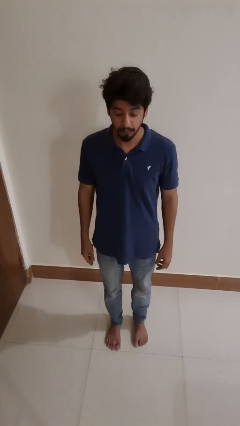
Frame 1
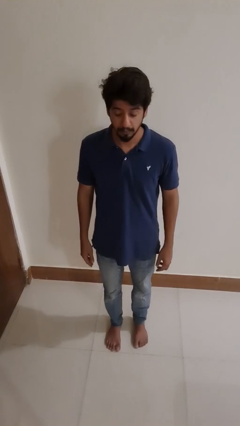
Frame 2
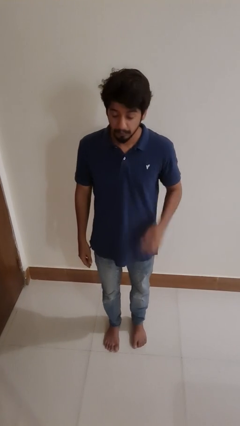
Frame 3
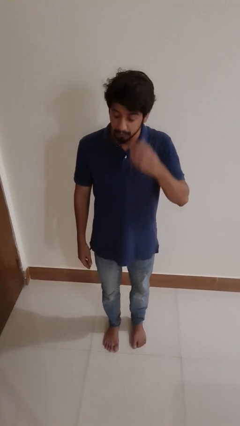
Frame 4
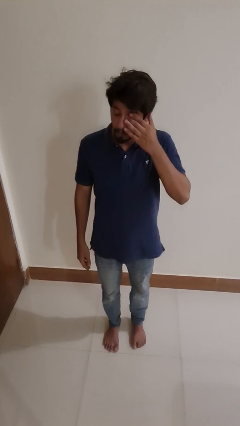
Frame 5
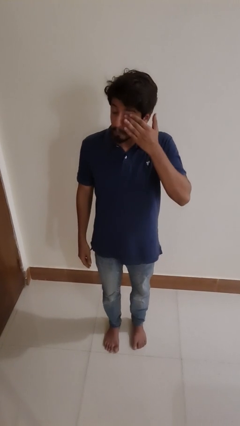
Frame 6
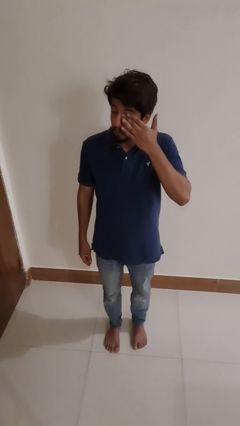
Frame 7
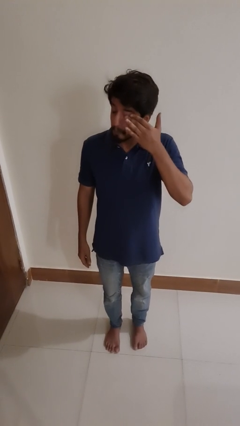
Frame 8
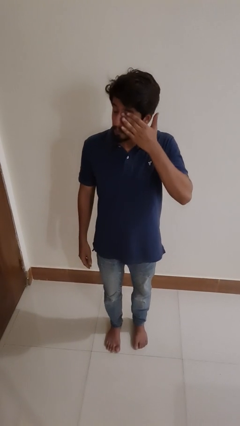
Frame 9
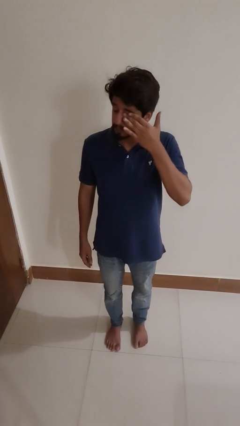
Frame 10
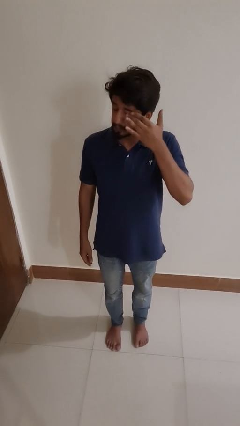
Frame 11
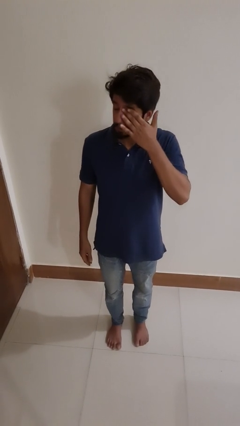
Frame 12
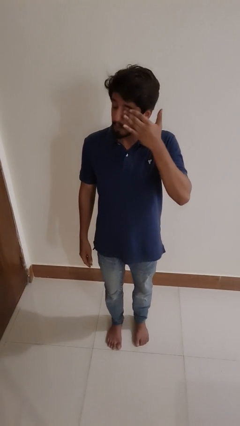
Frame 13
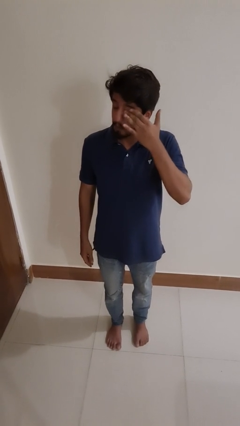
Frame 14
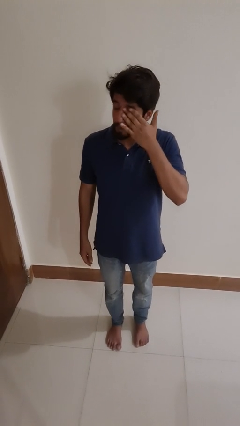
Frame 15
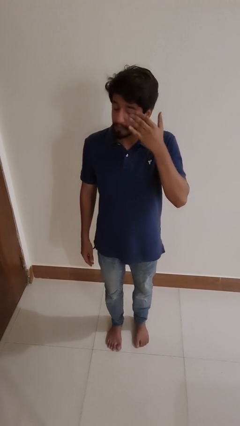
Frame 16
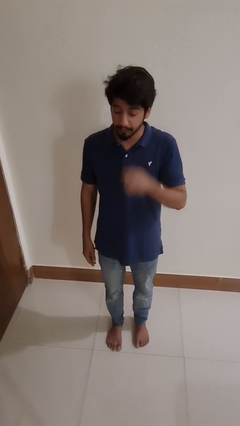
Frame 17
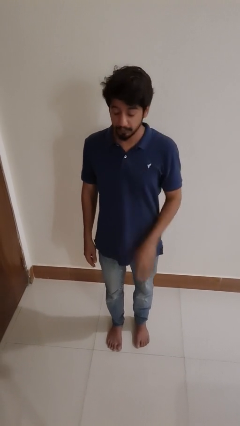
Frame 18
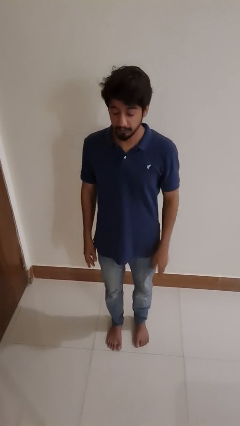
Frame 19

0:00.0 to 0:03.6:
person rubs eyes

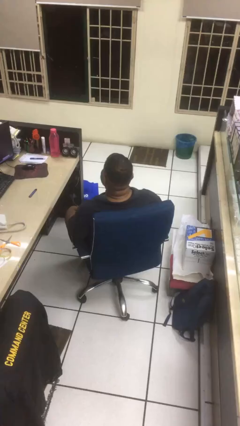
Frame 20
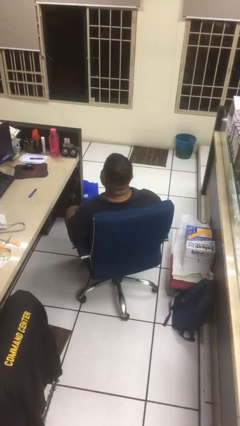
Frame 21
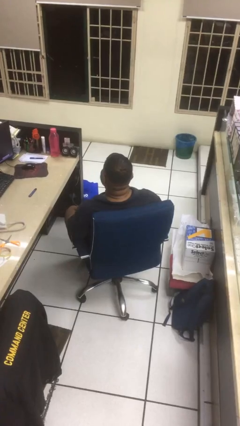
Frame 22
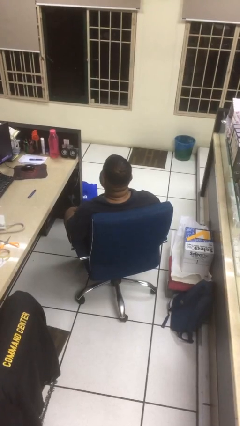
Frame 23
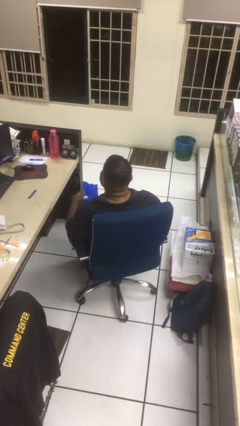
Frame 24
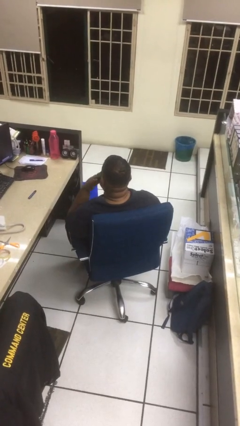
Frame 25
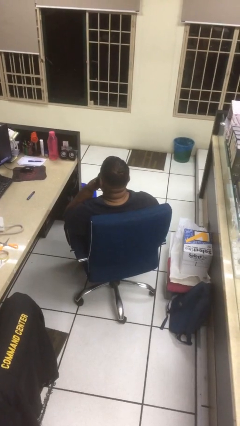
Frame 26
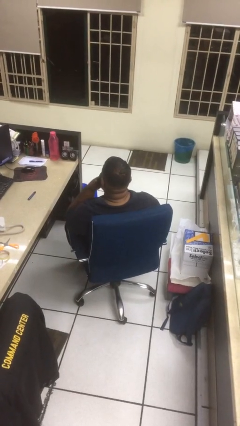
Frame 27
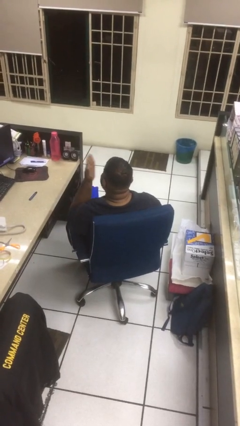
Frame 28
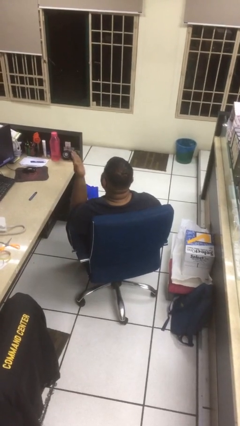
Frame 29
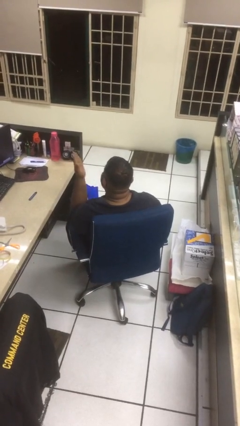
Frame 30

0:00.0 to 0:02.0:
person gestures blow kiss

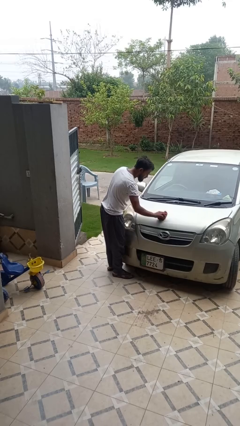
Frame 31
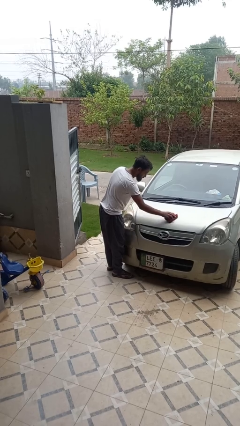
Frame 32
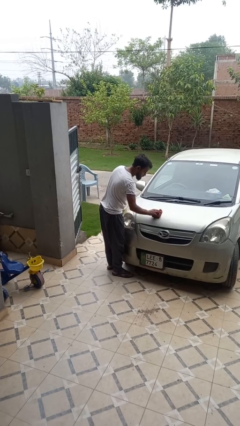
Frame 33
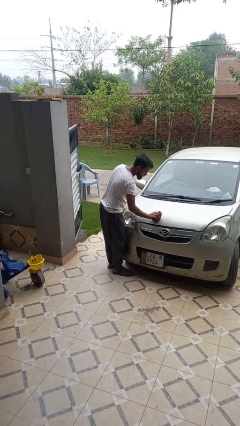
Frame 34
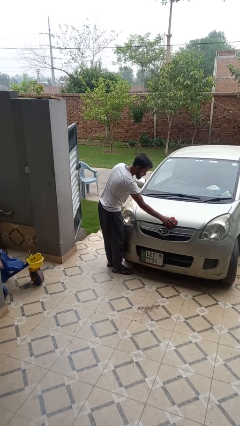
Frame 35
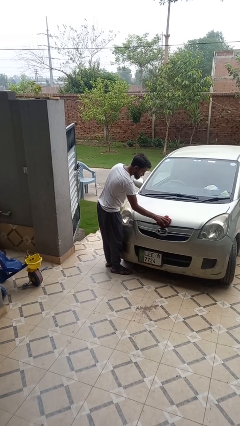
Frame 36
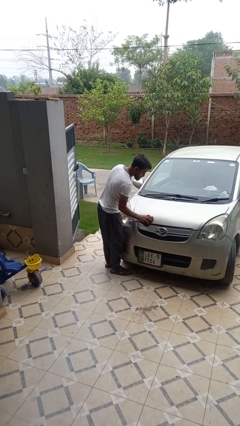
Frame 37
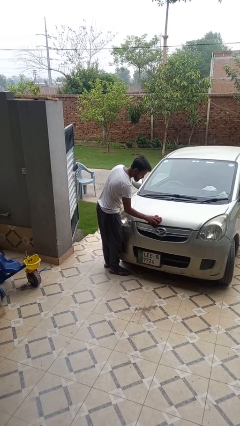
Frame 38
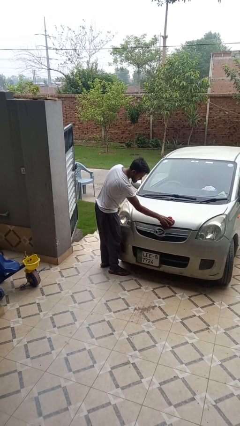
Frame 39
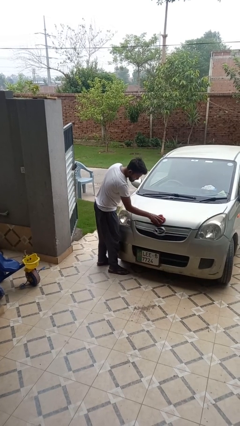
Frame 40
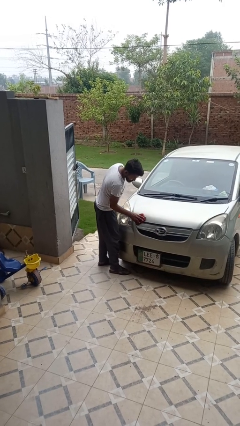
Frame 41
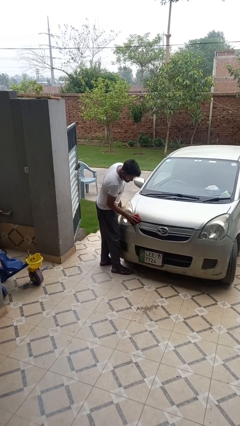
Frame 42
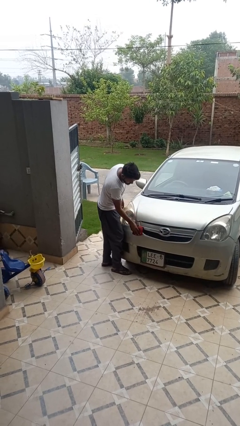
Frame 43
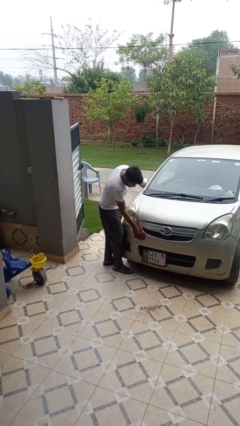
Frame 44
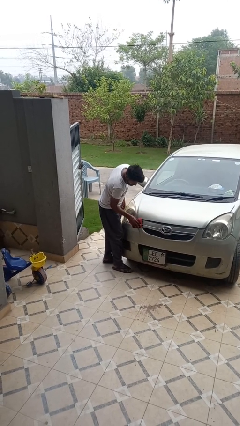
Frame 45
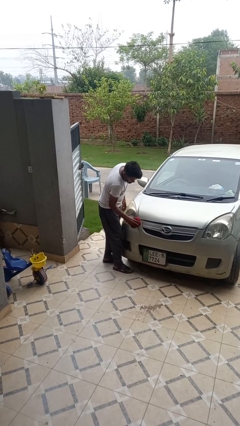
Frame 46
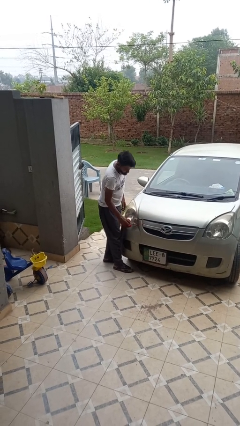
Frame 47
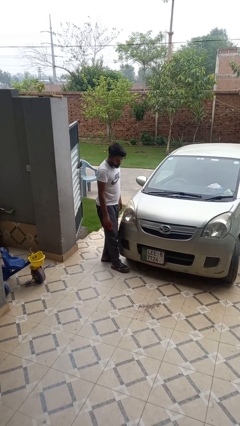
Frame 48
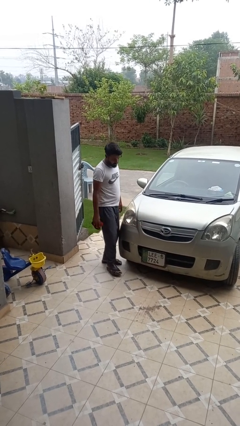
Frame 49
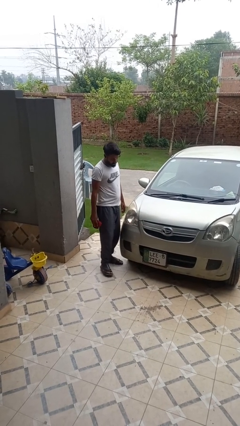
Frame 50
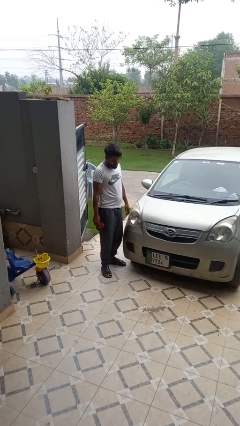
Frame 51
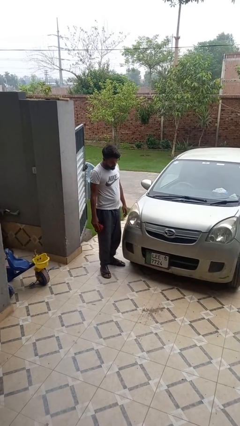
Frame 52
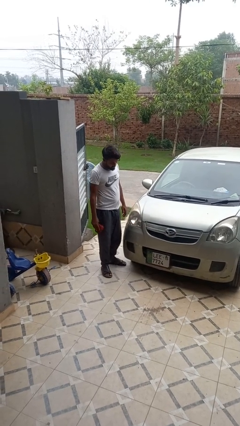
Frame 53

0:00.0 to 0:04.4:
person polishes car with rag

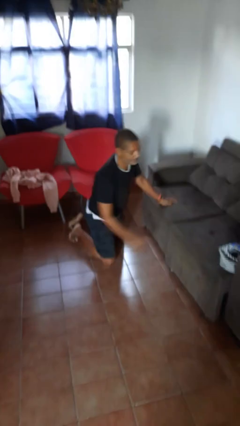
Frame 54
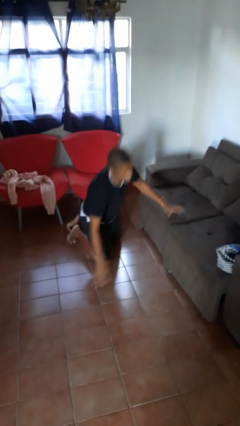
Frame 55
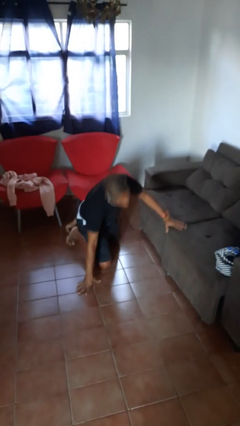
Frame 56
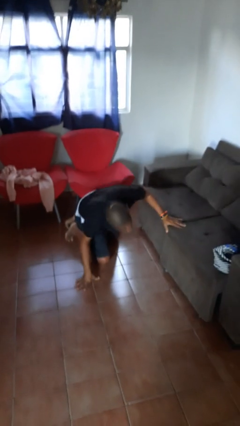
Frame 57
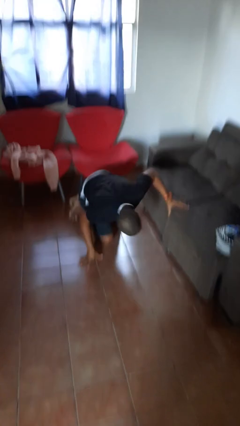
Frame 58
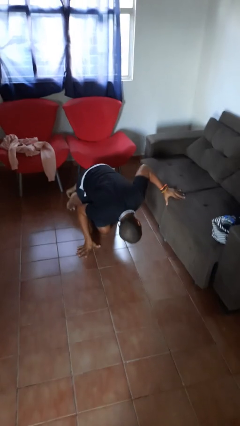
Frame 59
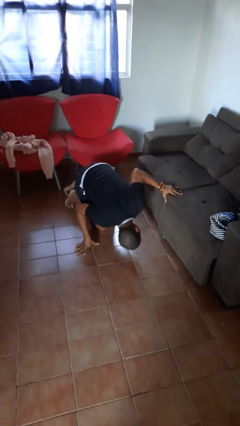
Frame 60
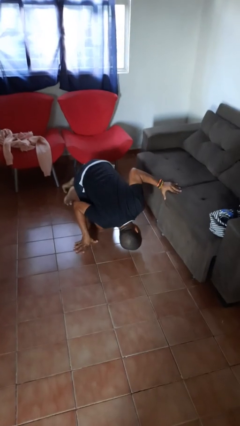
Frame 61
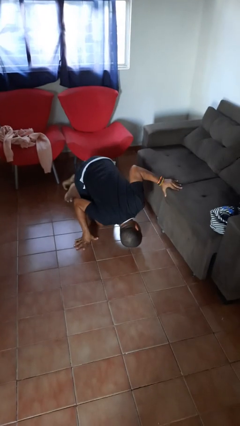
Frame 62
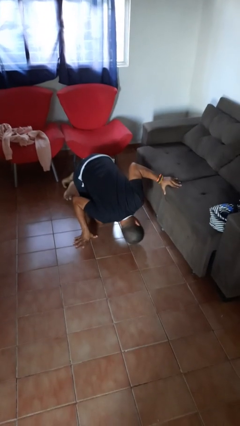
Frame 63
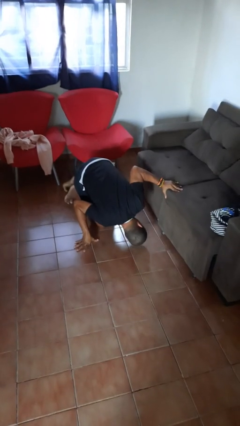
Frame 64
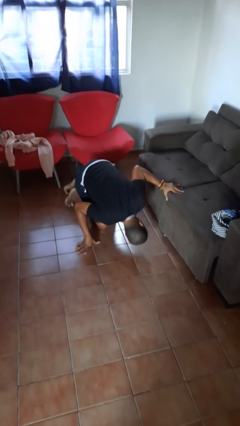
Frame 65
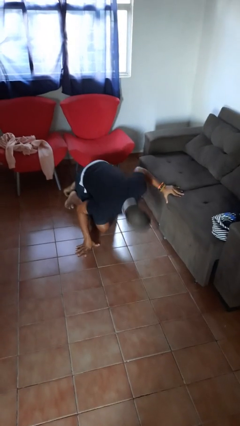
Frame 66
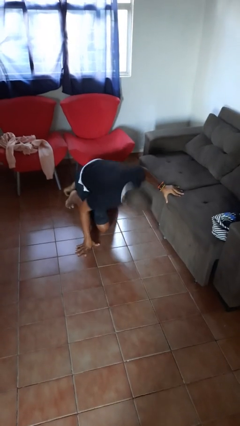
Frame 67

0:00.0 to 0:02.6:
person searches under couch

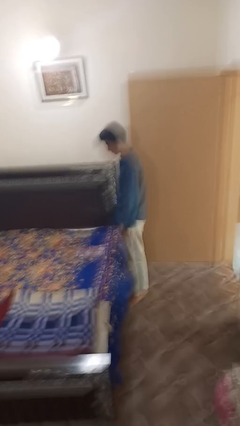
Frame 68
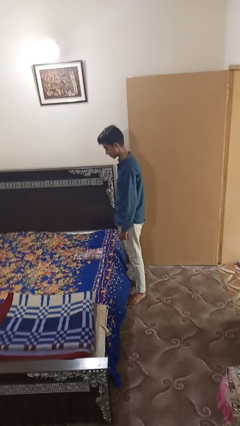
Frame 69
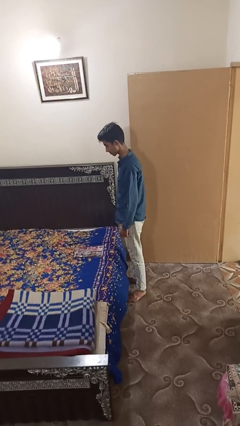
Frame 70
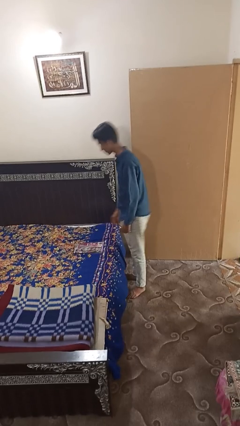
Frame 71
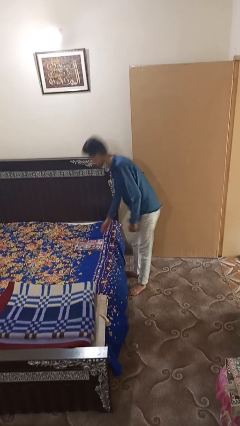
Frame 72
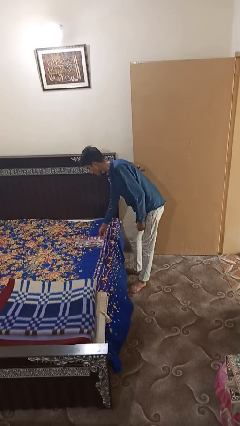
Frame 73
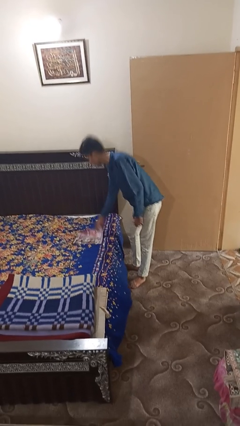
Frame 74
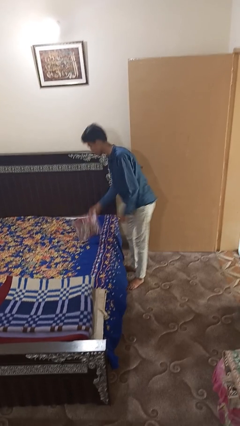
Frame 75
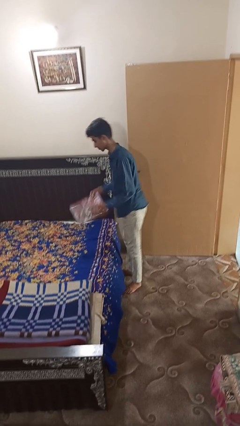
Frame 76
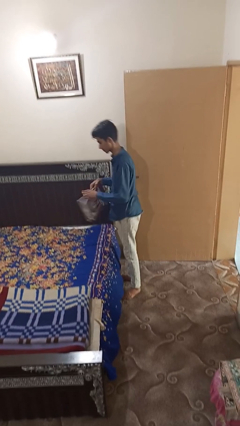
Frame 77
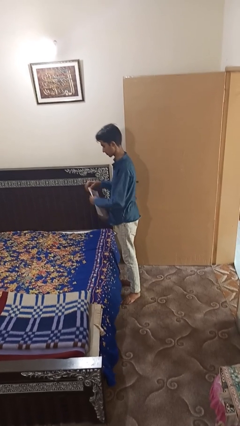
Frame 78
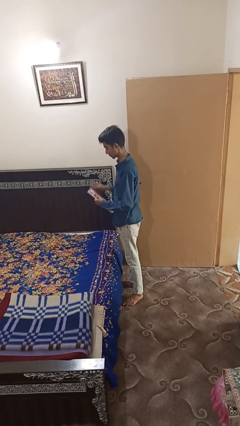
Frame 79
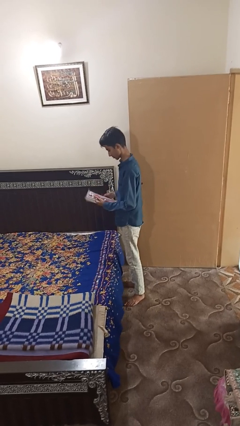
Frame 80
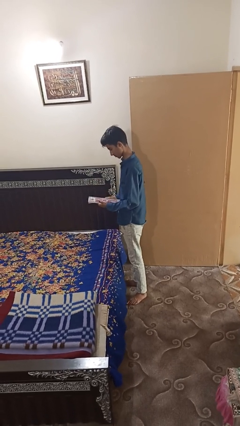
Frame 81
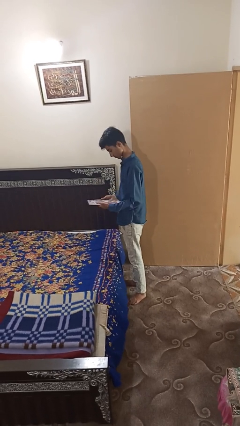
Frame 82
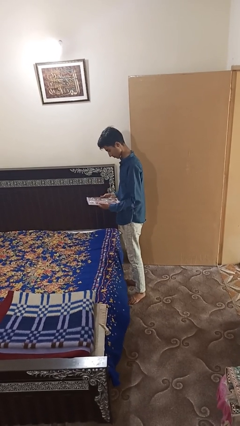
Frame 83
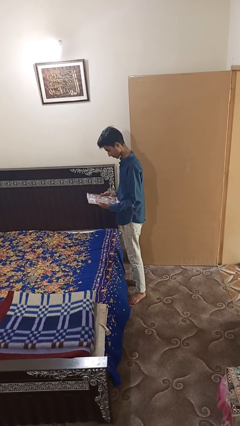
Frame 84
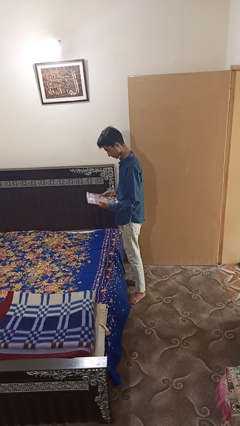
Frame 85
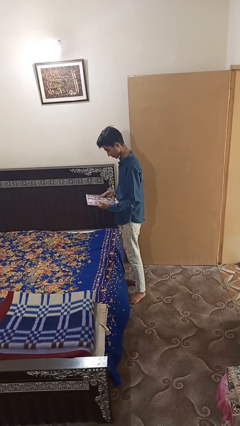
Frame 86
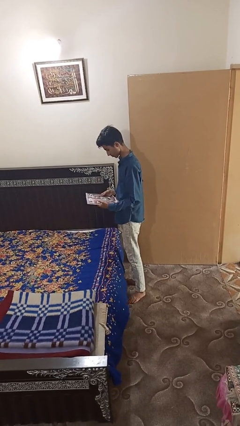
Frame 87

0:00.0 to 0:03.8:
person picks up object from bed

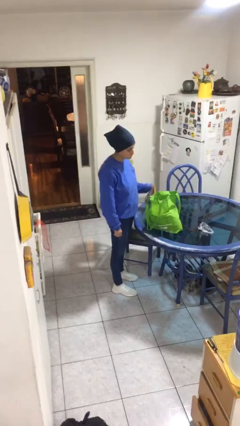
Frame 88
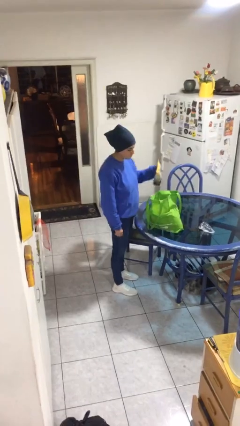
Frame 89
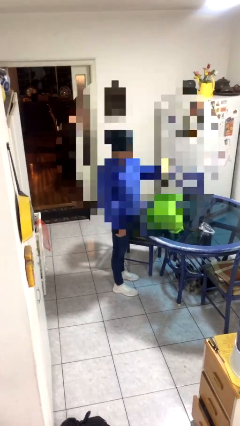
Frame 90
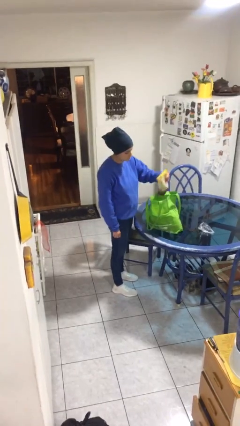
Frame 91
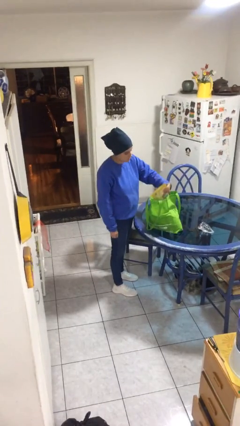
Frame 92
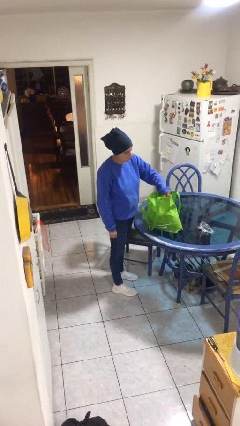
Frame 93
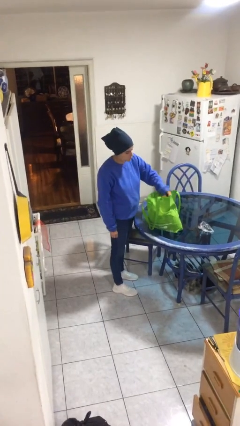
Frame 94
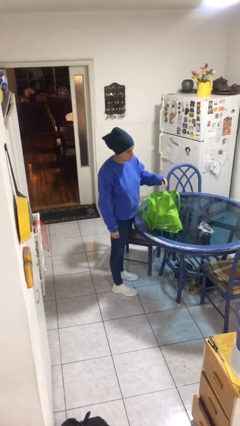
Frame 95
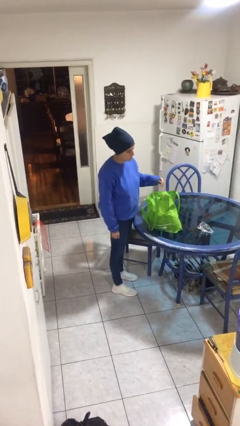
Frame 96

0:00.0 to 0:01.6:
person puts object into bag
